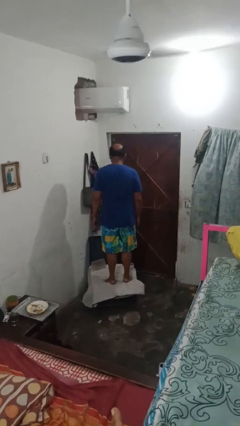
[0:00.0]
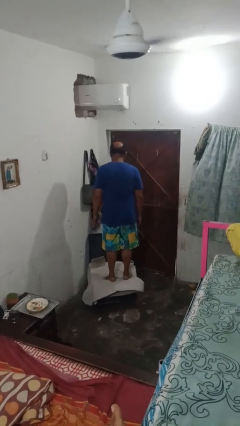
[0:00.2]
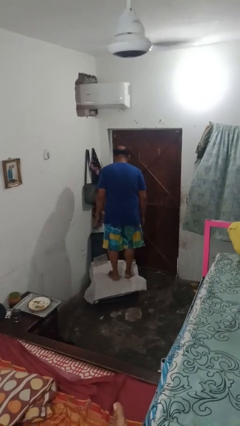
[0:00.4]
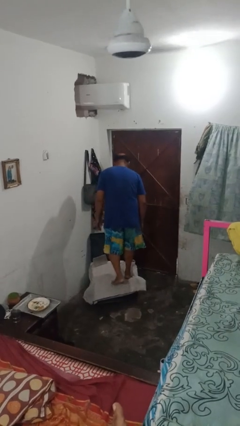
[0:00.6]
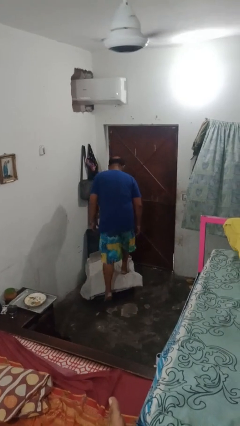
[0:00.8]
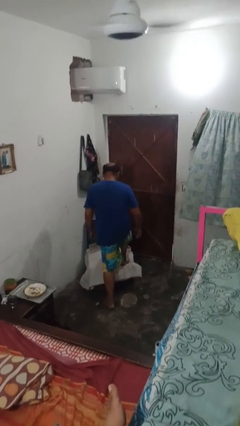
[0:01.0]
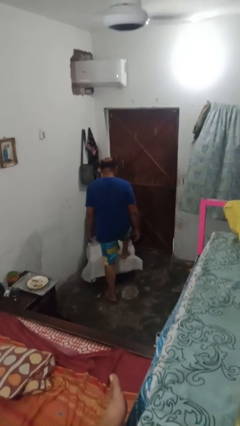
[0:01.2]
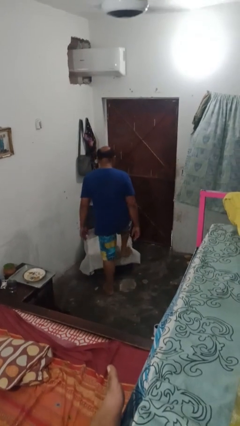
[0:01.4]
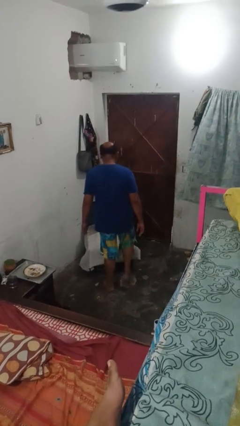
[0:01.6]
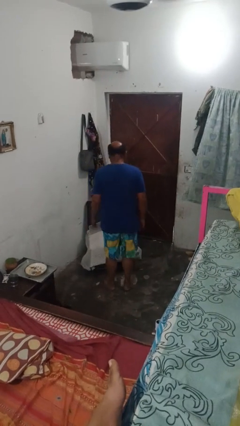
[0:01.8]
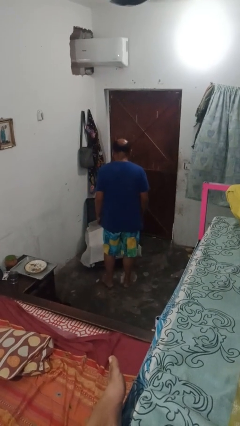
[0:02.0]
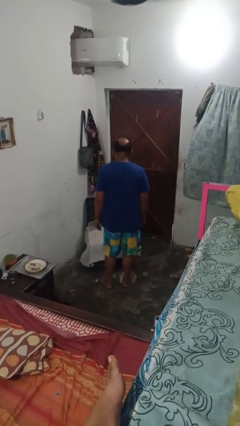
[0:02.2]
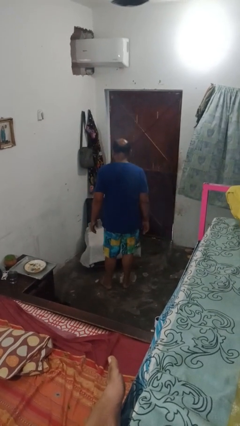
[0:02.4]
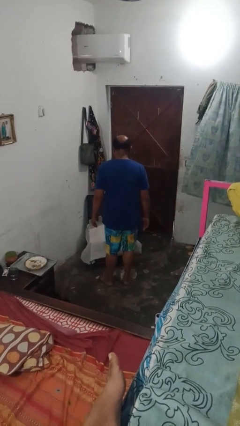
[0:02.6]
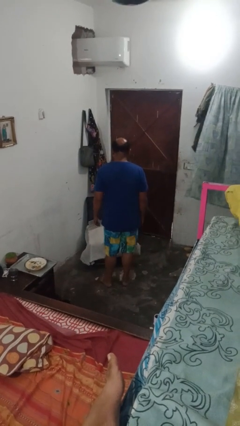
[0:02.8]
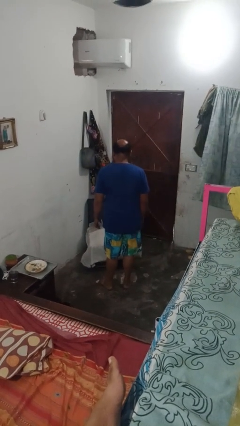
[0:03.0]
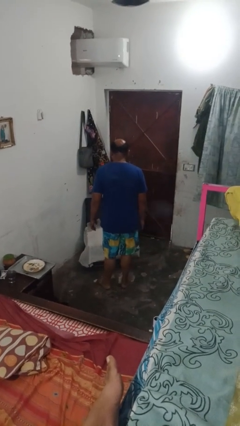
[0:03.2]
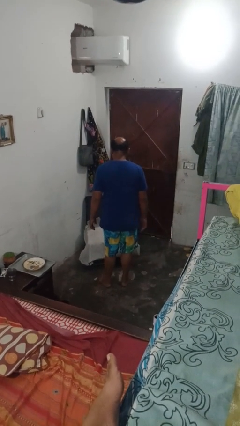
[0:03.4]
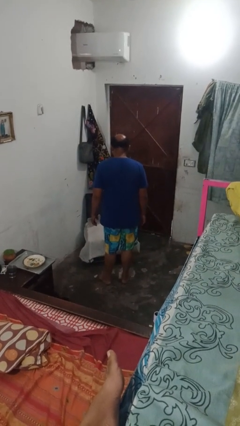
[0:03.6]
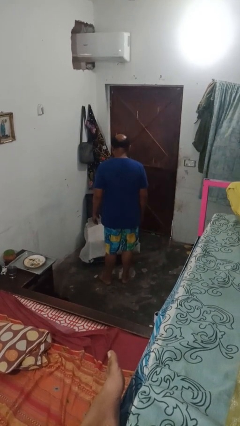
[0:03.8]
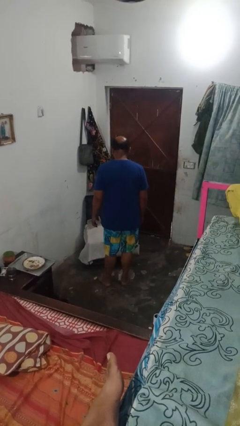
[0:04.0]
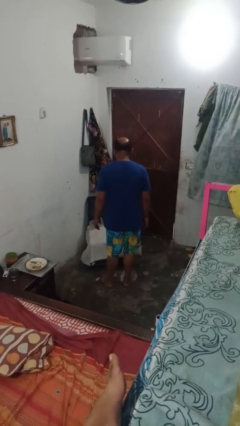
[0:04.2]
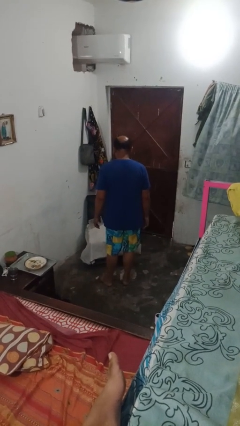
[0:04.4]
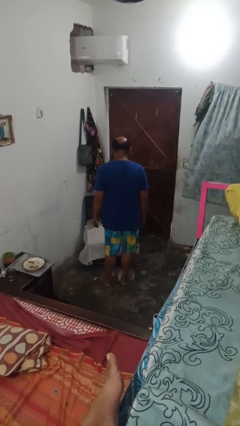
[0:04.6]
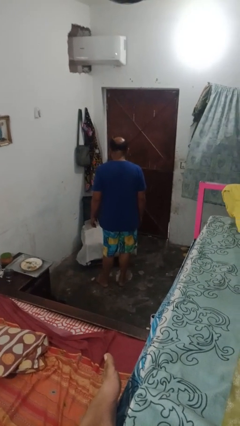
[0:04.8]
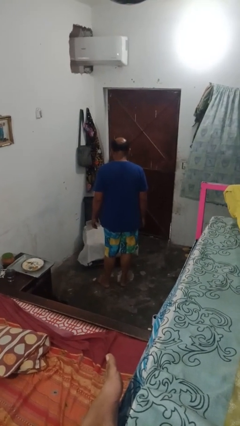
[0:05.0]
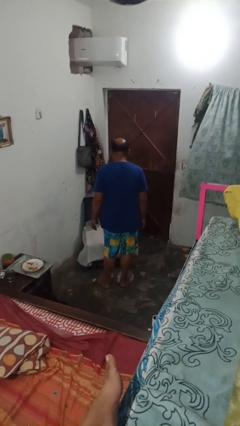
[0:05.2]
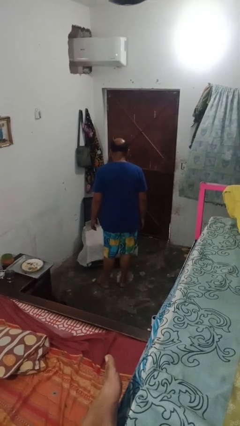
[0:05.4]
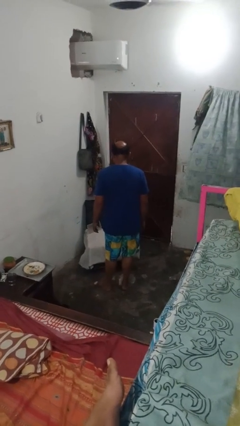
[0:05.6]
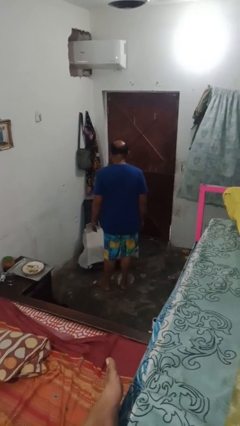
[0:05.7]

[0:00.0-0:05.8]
person climbs off couch

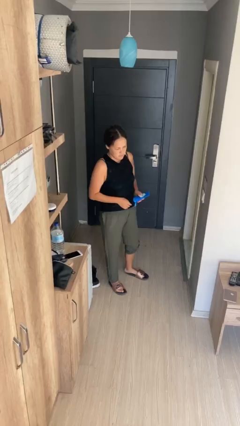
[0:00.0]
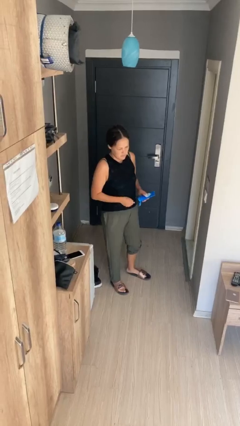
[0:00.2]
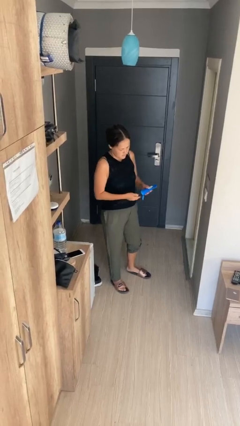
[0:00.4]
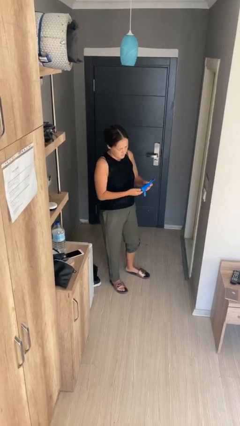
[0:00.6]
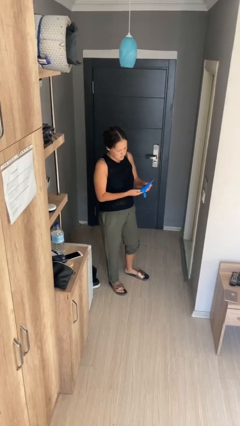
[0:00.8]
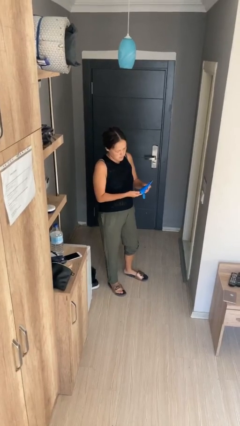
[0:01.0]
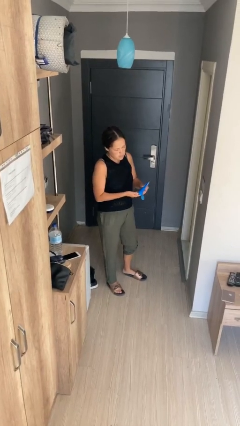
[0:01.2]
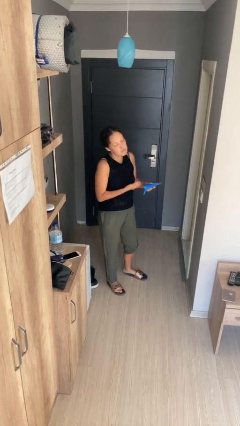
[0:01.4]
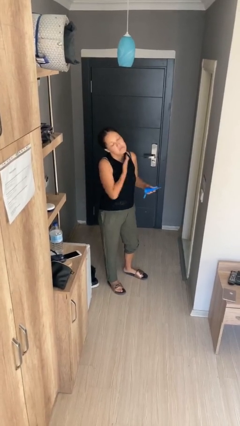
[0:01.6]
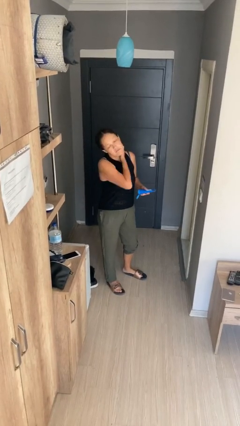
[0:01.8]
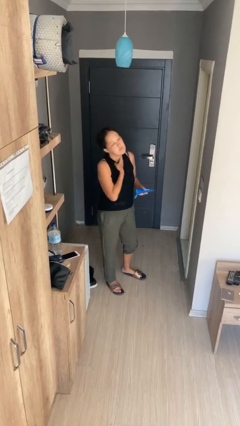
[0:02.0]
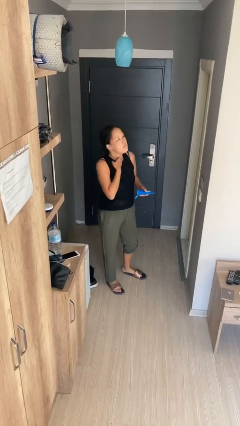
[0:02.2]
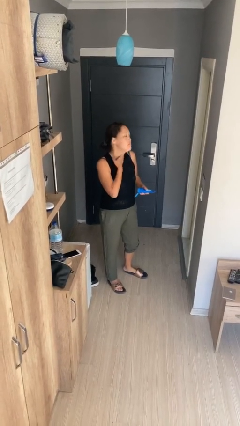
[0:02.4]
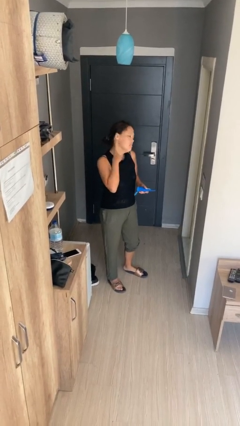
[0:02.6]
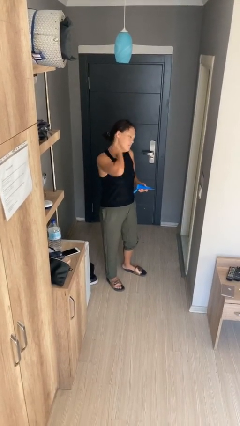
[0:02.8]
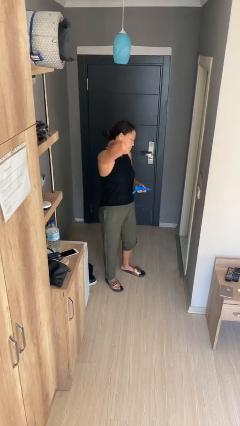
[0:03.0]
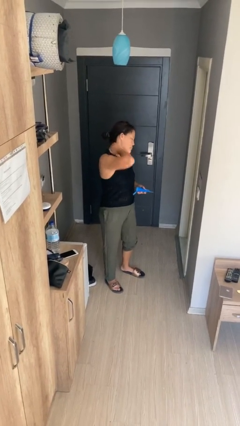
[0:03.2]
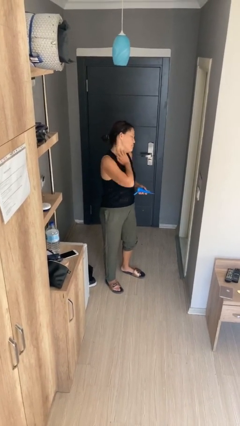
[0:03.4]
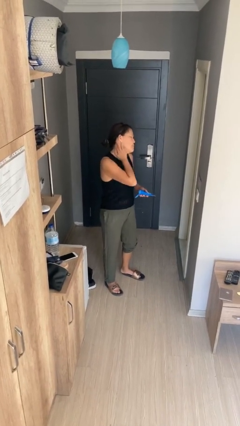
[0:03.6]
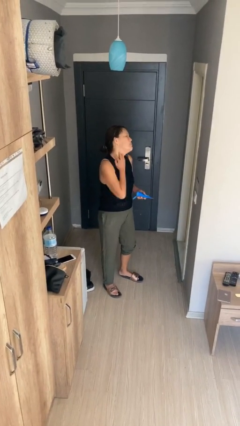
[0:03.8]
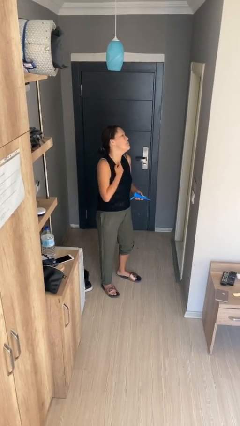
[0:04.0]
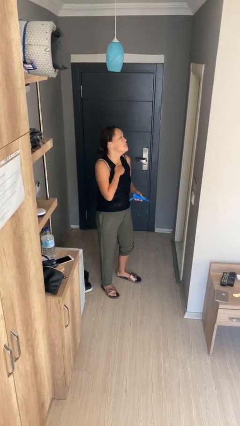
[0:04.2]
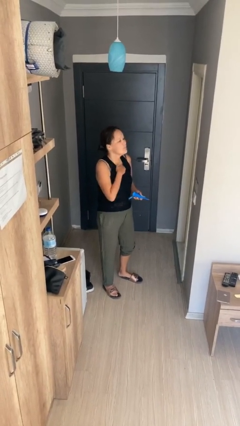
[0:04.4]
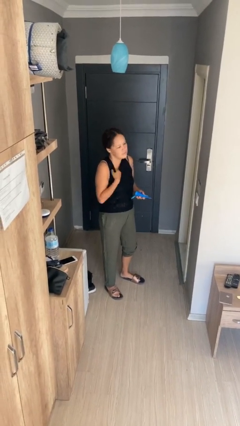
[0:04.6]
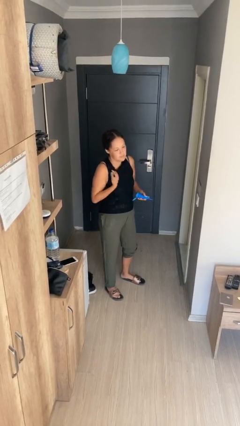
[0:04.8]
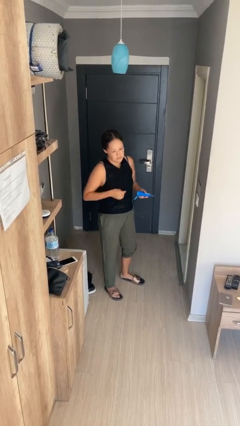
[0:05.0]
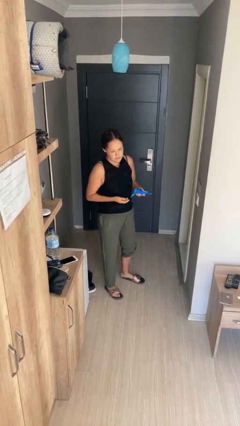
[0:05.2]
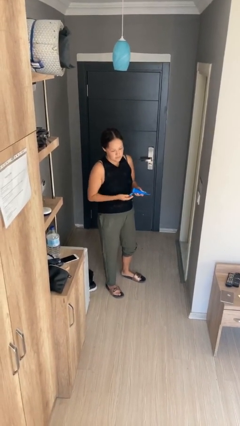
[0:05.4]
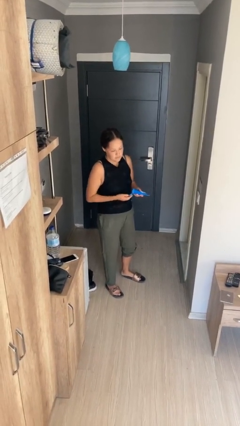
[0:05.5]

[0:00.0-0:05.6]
person applies sunscreen

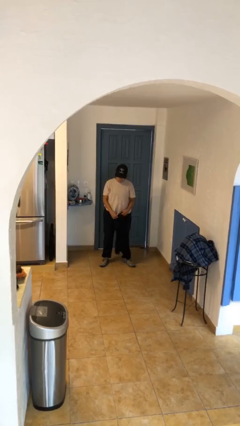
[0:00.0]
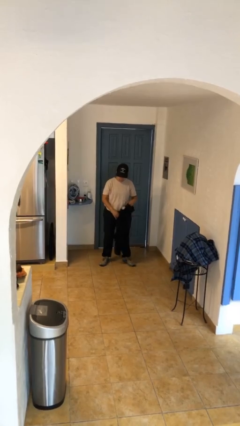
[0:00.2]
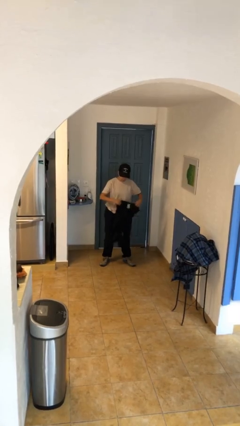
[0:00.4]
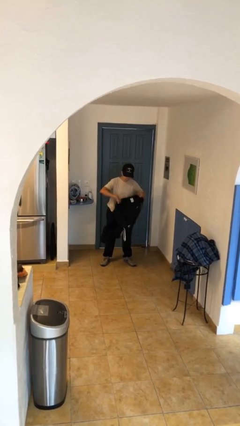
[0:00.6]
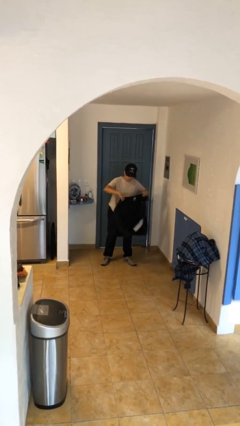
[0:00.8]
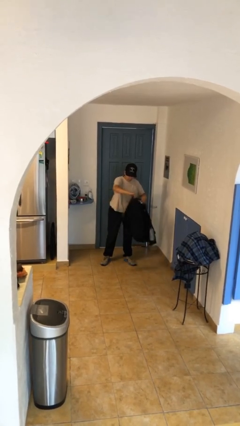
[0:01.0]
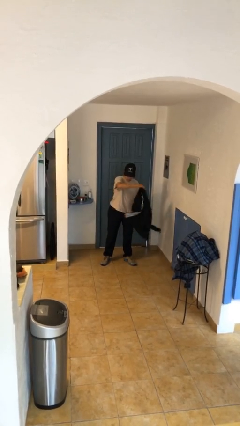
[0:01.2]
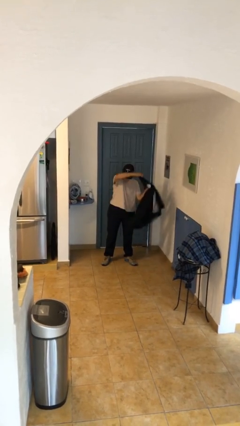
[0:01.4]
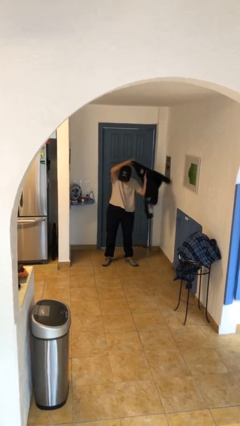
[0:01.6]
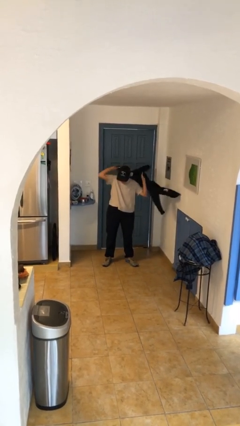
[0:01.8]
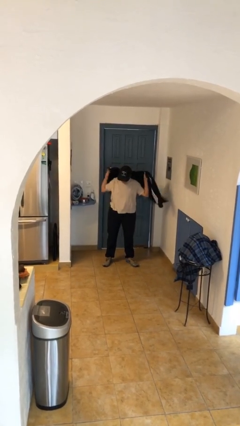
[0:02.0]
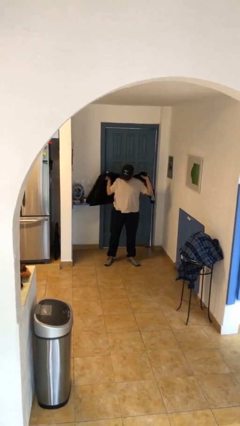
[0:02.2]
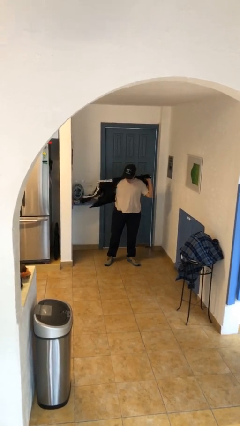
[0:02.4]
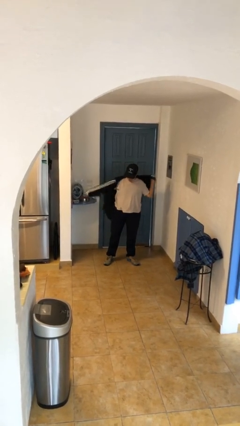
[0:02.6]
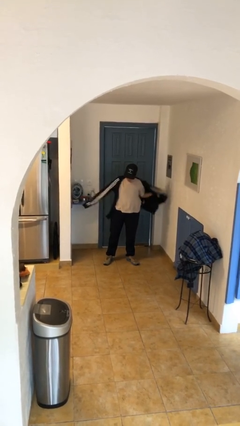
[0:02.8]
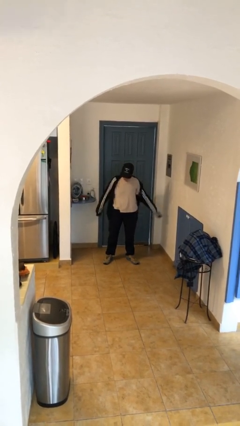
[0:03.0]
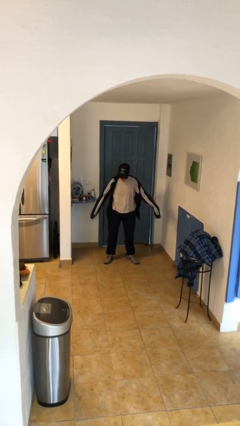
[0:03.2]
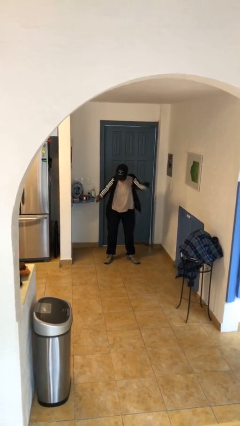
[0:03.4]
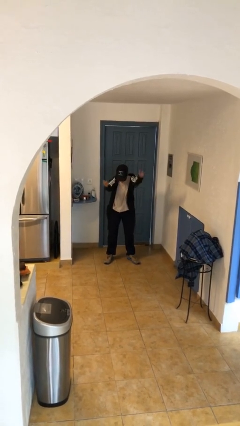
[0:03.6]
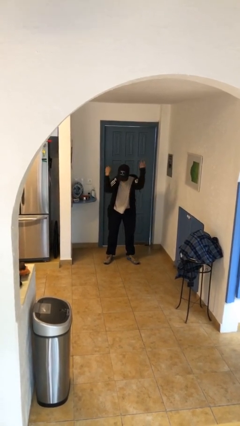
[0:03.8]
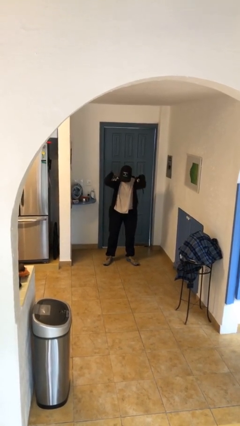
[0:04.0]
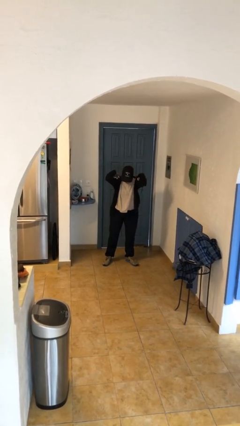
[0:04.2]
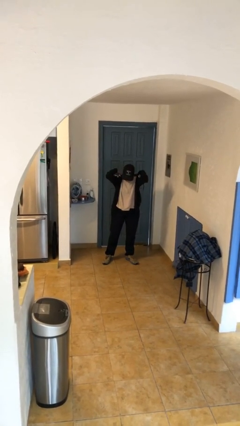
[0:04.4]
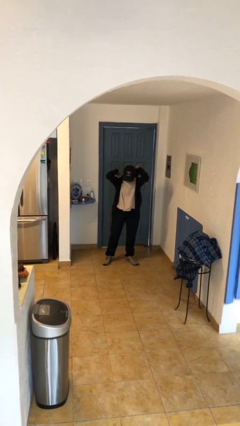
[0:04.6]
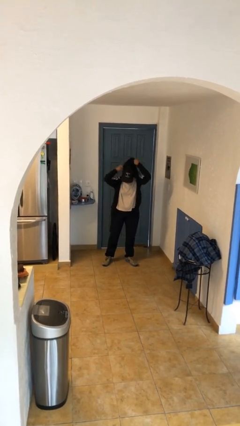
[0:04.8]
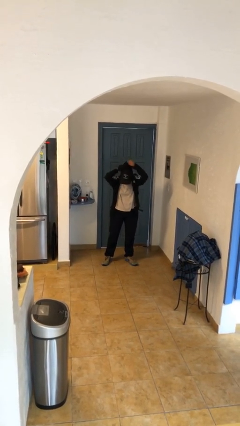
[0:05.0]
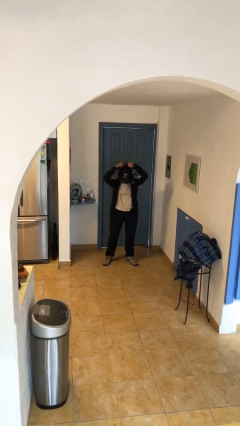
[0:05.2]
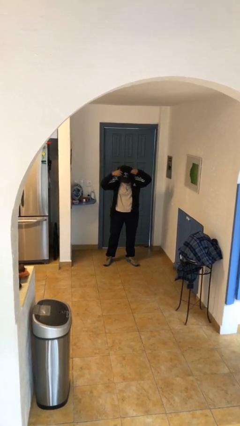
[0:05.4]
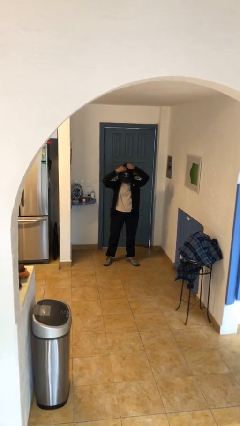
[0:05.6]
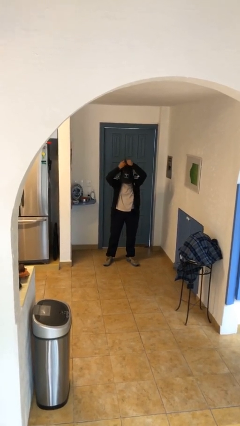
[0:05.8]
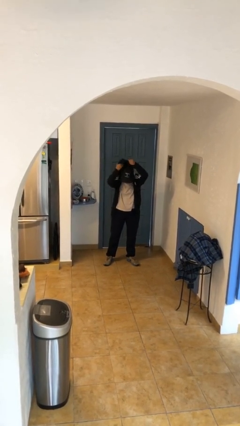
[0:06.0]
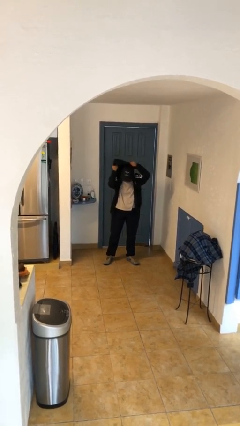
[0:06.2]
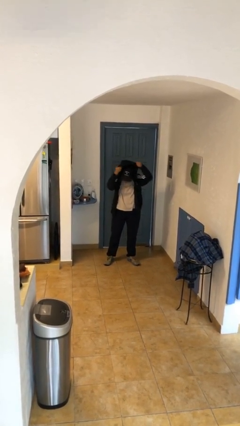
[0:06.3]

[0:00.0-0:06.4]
person puts on hoodie
